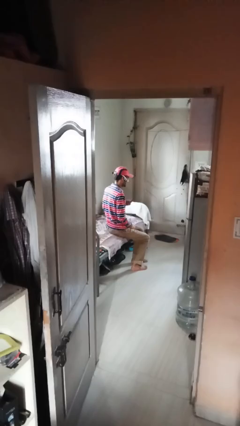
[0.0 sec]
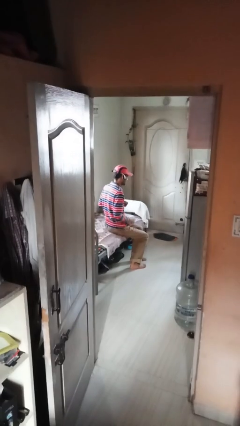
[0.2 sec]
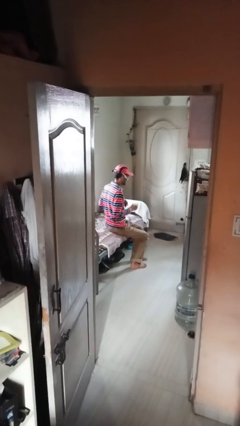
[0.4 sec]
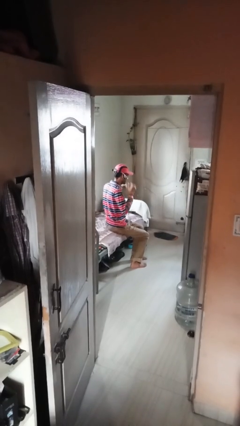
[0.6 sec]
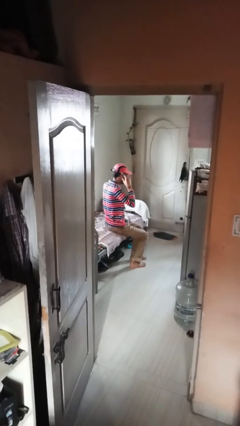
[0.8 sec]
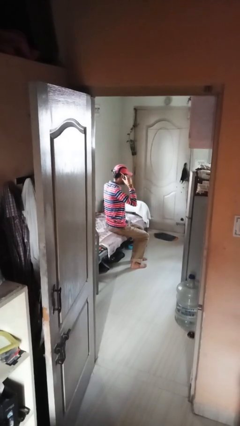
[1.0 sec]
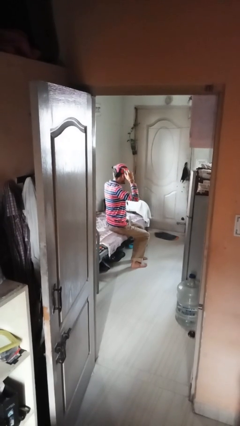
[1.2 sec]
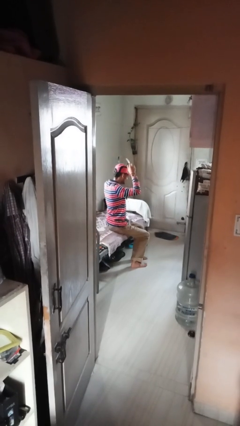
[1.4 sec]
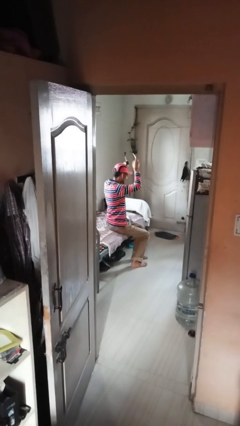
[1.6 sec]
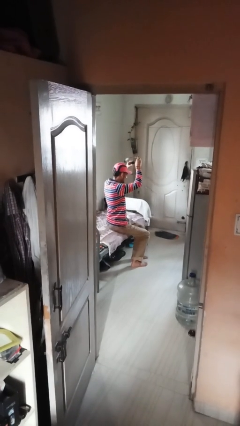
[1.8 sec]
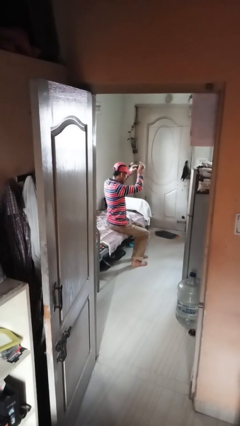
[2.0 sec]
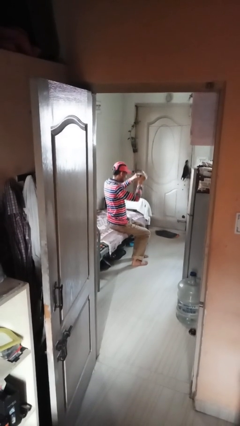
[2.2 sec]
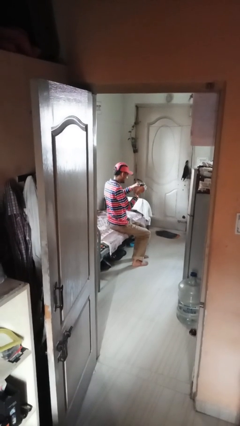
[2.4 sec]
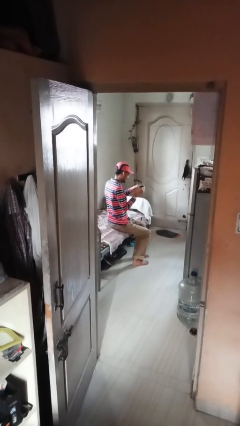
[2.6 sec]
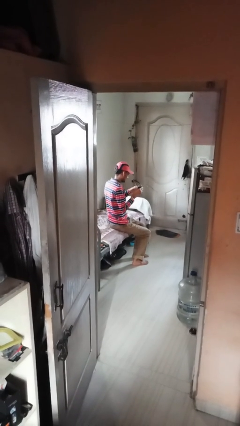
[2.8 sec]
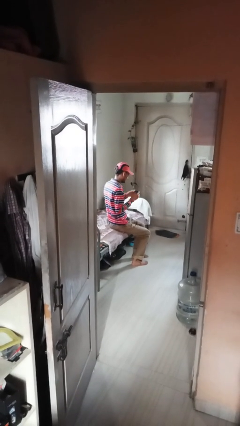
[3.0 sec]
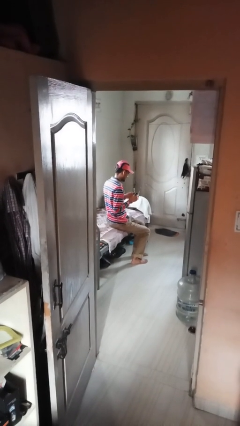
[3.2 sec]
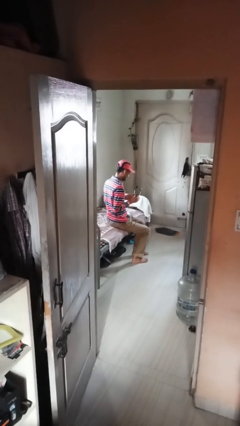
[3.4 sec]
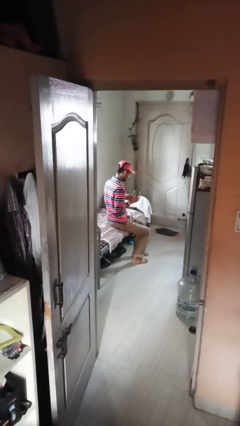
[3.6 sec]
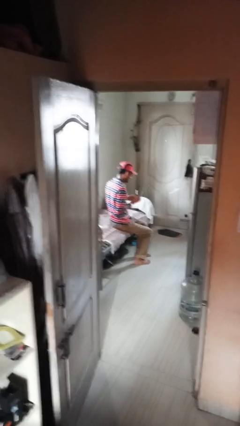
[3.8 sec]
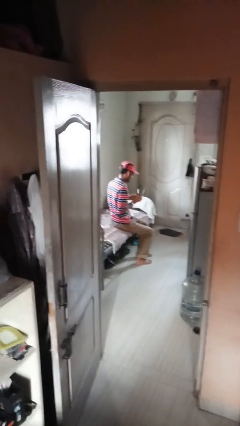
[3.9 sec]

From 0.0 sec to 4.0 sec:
person takes off headphones

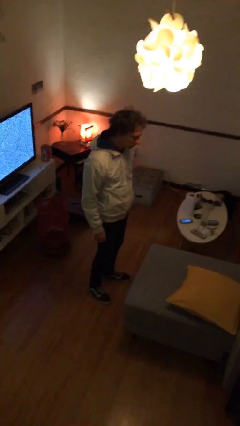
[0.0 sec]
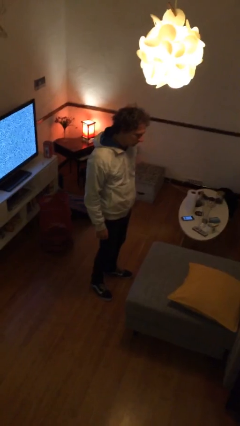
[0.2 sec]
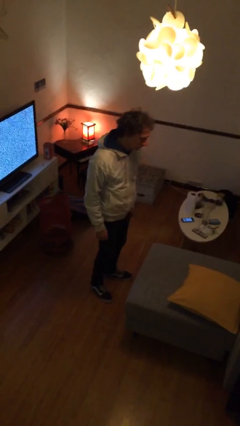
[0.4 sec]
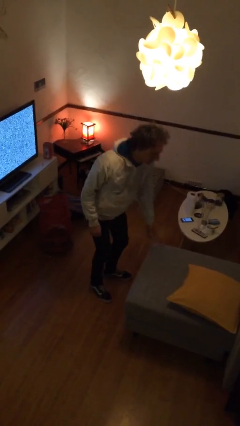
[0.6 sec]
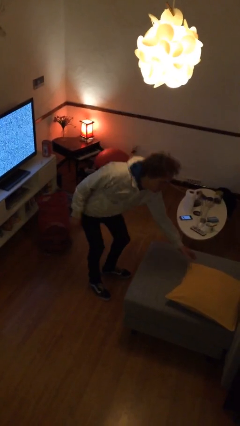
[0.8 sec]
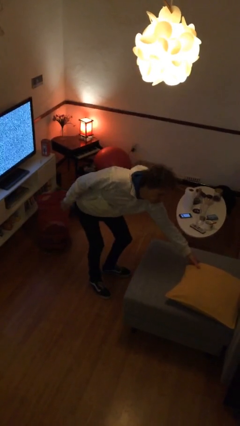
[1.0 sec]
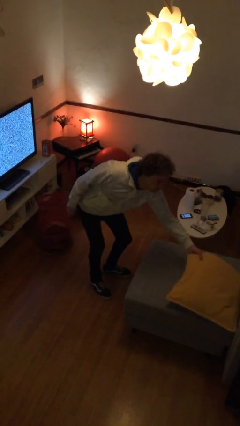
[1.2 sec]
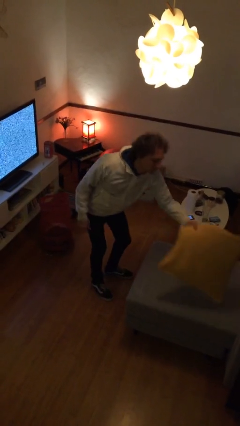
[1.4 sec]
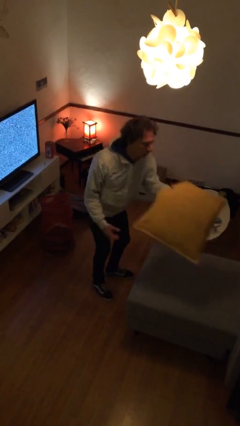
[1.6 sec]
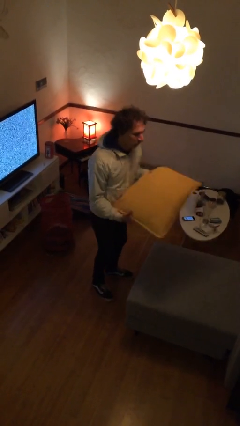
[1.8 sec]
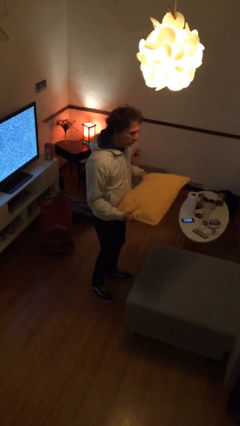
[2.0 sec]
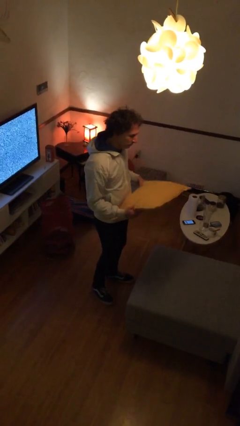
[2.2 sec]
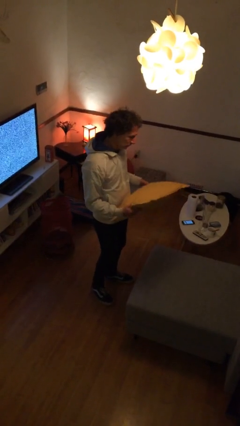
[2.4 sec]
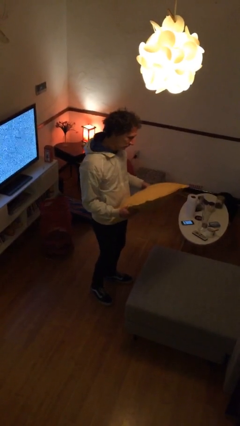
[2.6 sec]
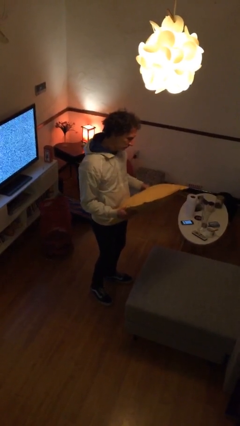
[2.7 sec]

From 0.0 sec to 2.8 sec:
person picks up object from couch

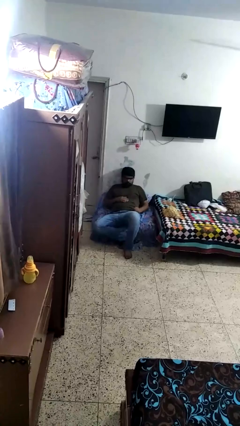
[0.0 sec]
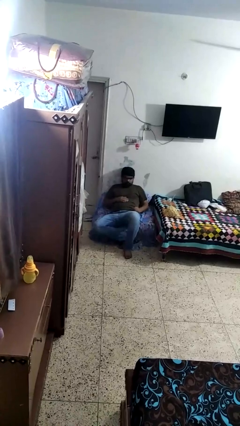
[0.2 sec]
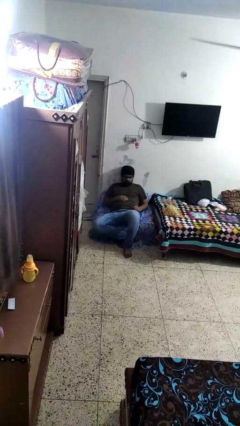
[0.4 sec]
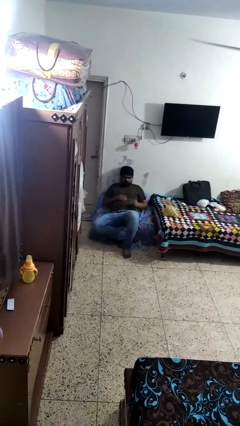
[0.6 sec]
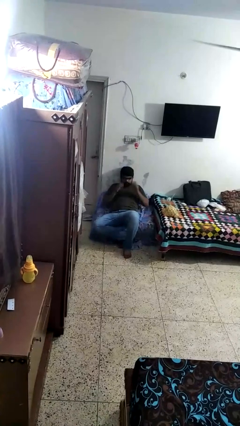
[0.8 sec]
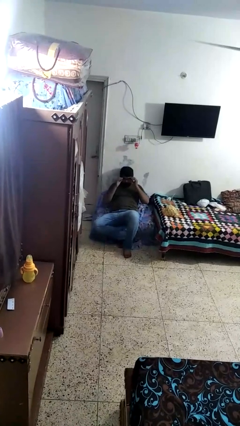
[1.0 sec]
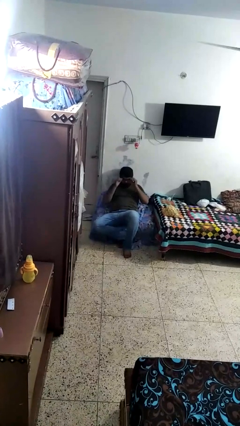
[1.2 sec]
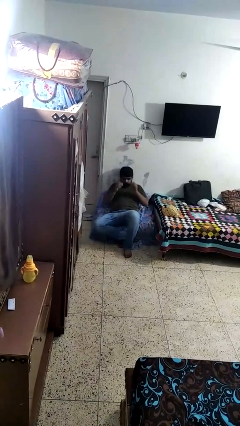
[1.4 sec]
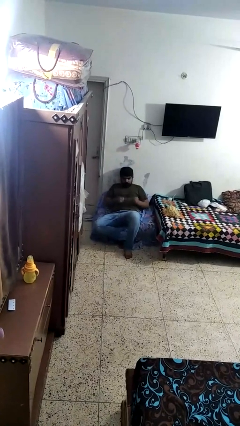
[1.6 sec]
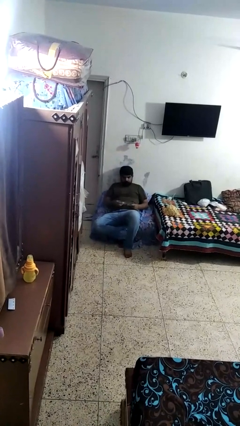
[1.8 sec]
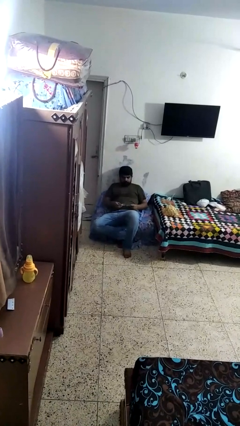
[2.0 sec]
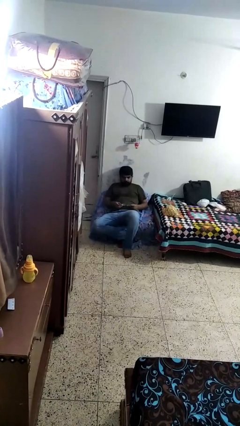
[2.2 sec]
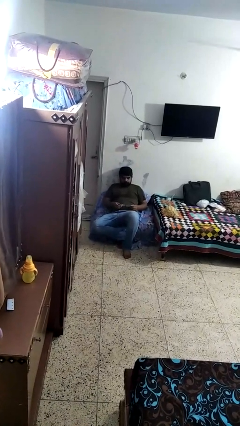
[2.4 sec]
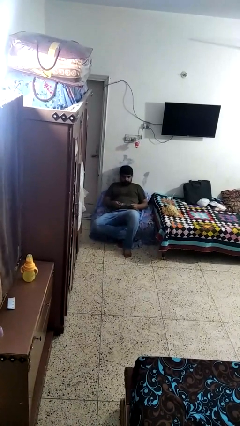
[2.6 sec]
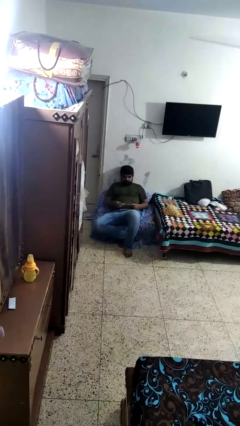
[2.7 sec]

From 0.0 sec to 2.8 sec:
person takes off glasses

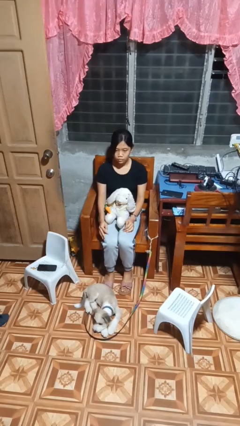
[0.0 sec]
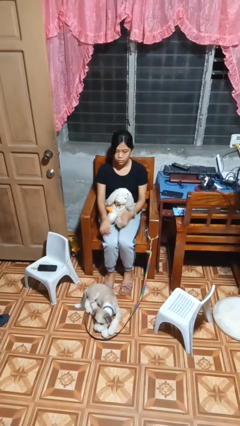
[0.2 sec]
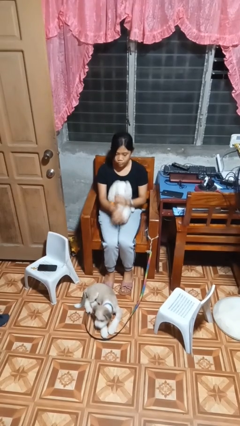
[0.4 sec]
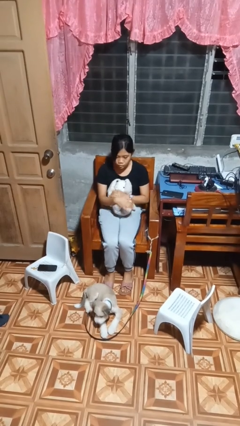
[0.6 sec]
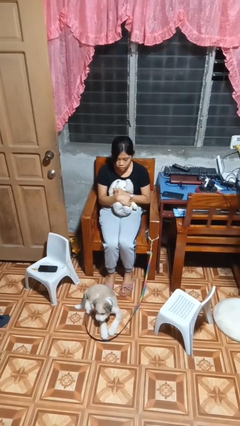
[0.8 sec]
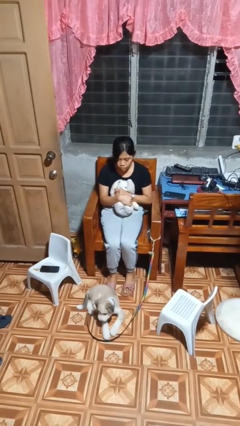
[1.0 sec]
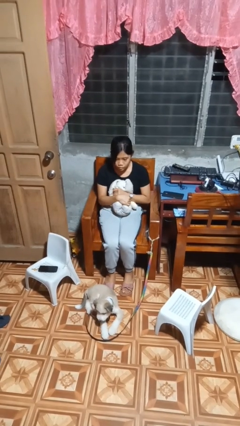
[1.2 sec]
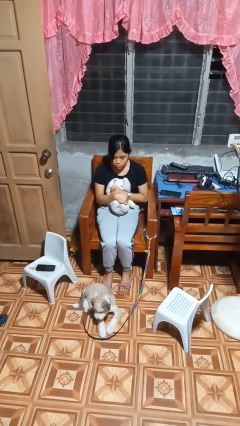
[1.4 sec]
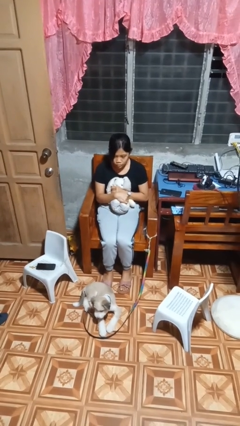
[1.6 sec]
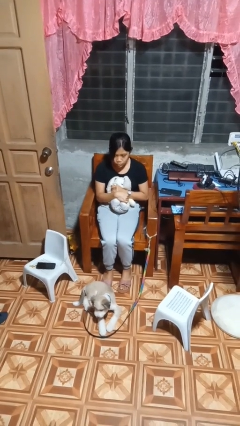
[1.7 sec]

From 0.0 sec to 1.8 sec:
person hugs stuffed animal

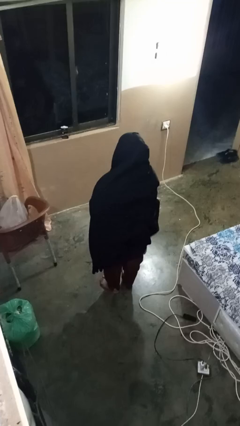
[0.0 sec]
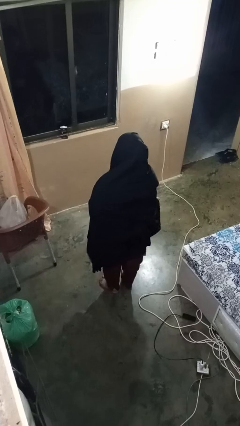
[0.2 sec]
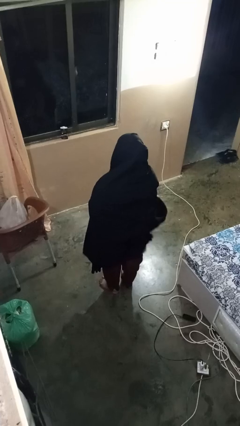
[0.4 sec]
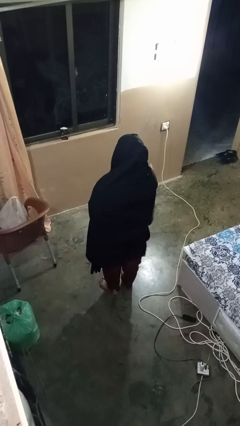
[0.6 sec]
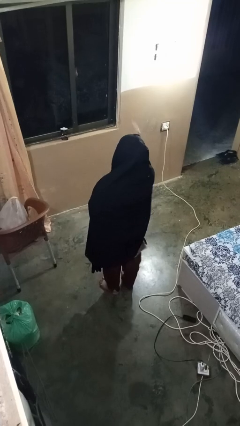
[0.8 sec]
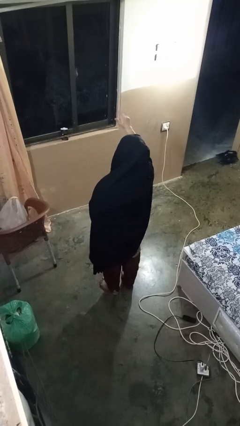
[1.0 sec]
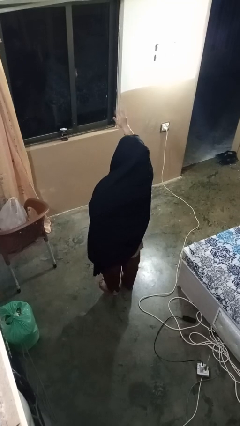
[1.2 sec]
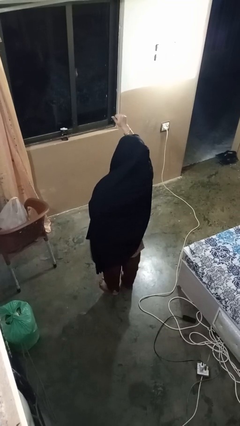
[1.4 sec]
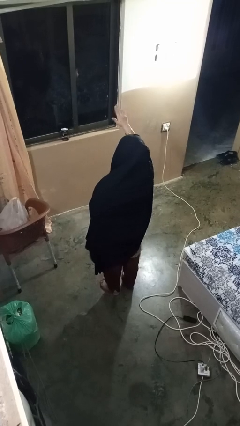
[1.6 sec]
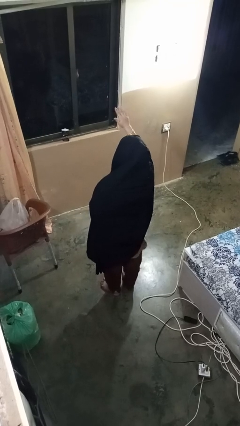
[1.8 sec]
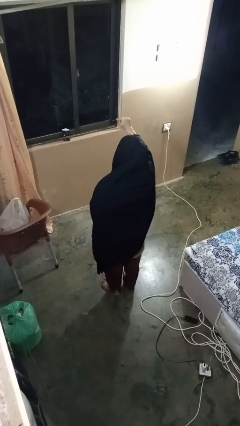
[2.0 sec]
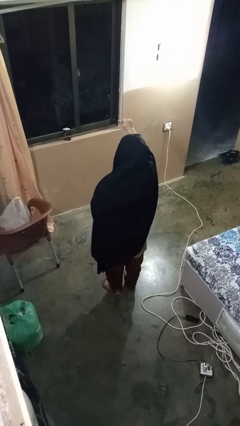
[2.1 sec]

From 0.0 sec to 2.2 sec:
person gestures come here

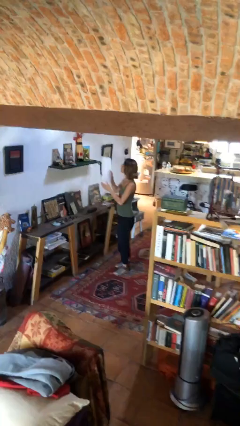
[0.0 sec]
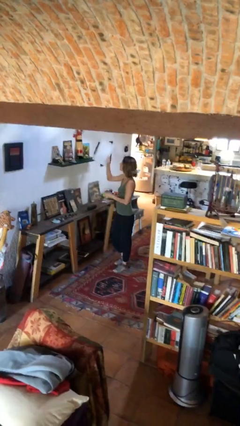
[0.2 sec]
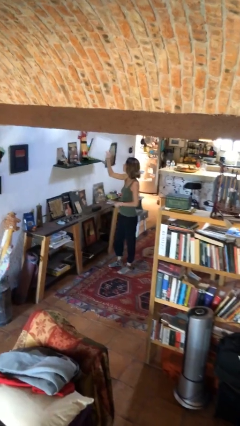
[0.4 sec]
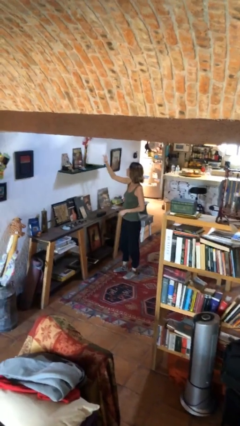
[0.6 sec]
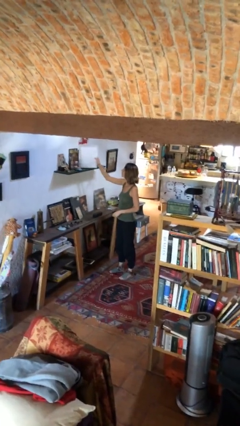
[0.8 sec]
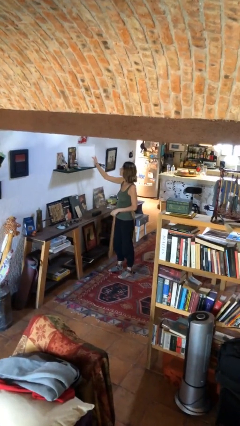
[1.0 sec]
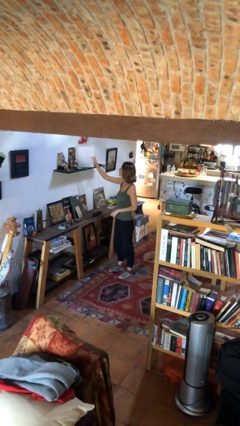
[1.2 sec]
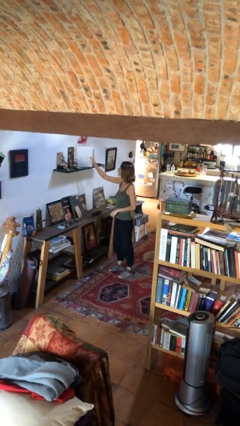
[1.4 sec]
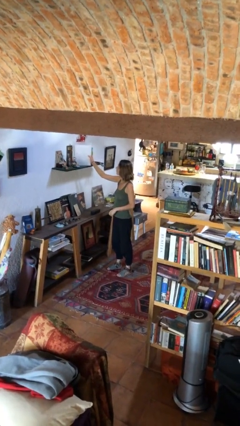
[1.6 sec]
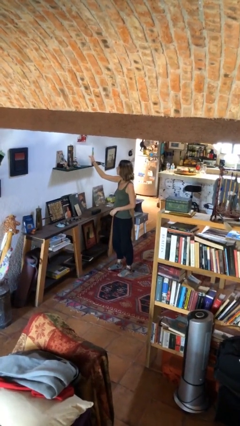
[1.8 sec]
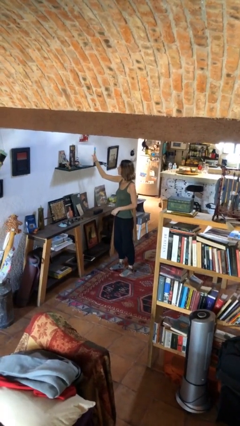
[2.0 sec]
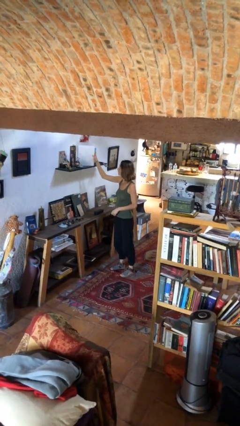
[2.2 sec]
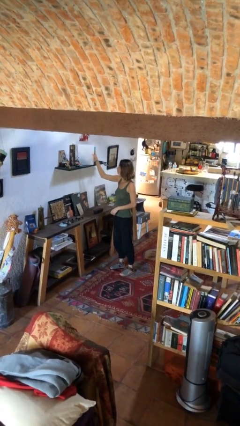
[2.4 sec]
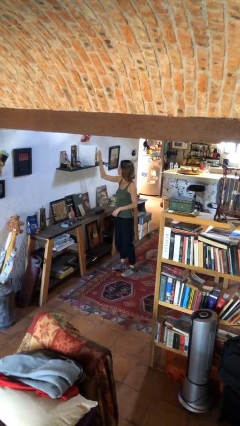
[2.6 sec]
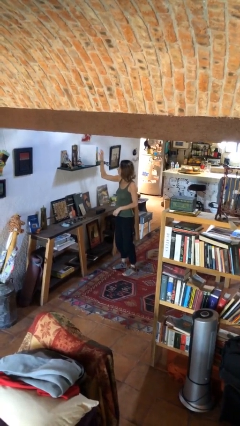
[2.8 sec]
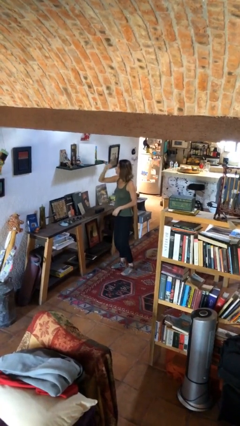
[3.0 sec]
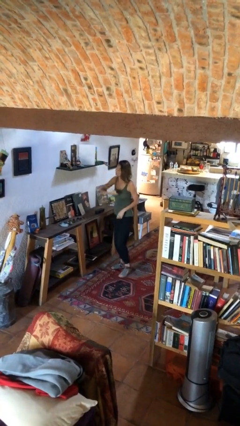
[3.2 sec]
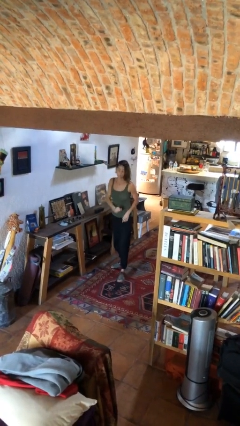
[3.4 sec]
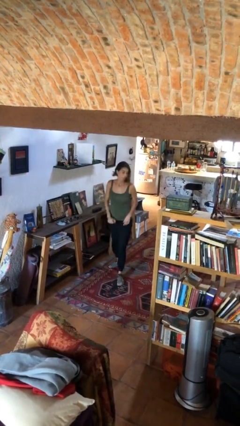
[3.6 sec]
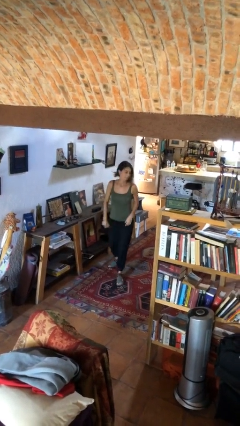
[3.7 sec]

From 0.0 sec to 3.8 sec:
person puts down object on shelf
